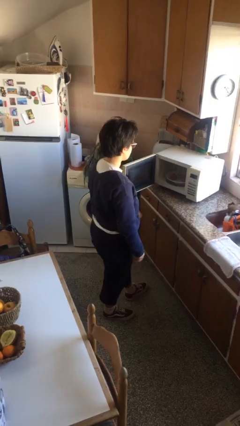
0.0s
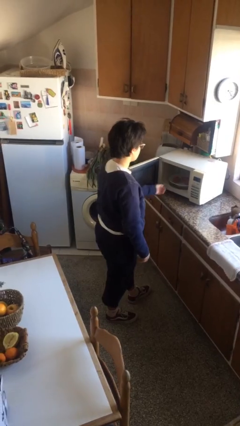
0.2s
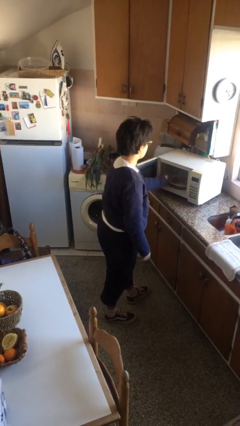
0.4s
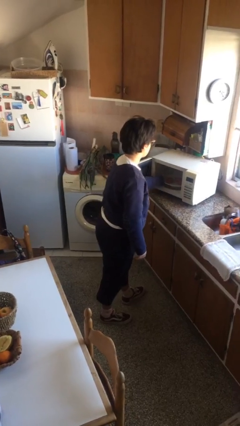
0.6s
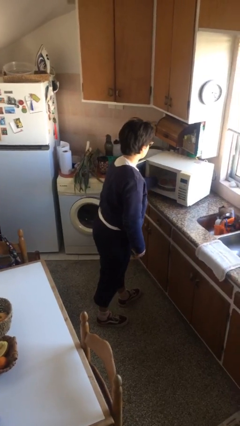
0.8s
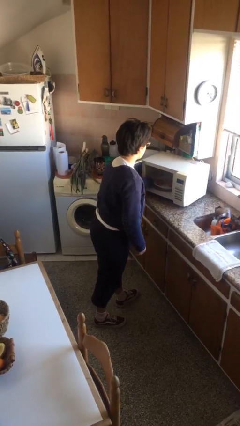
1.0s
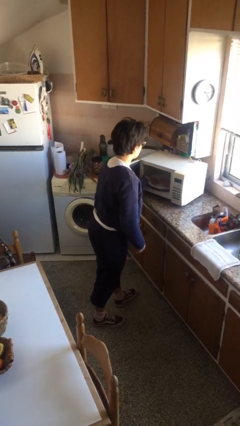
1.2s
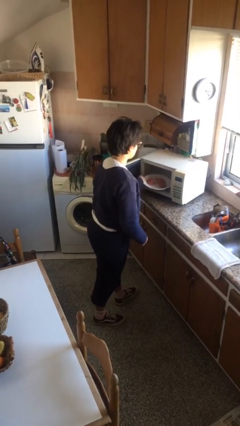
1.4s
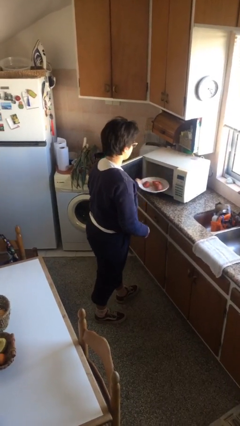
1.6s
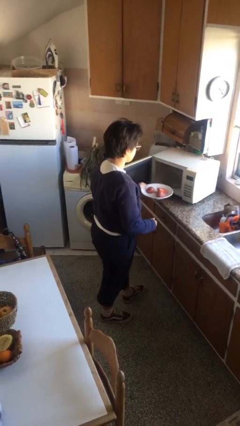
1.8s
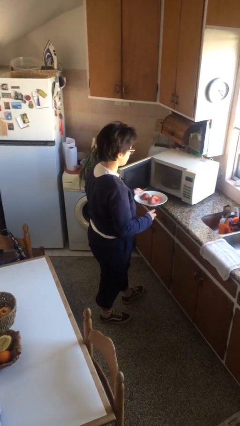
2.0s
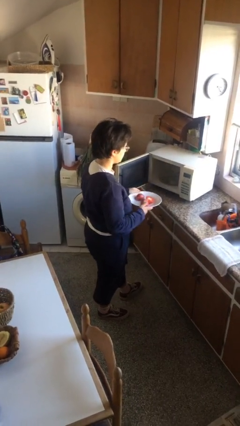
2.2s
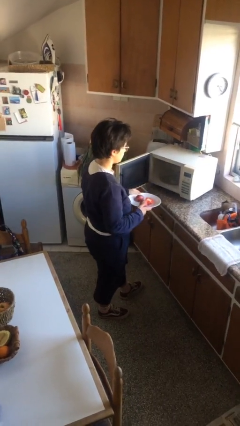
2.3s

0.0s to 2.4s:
person takes object from microwave

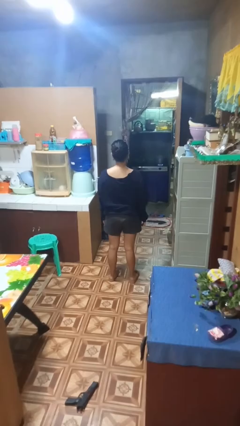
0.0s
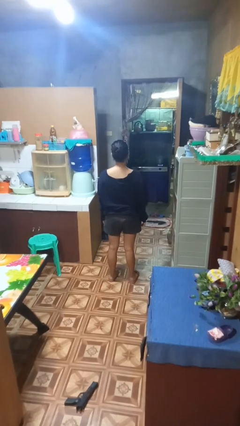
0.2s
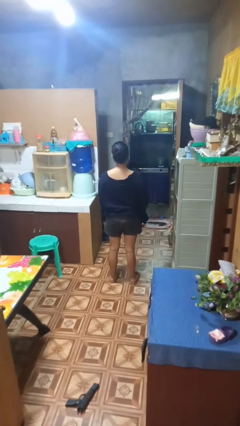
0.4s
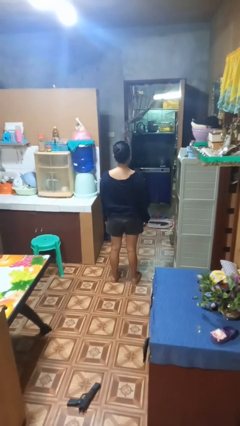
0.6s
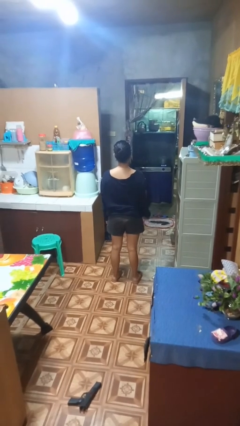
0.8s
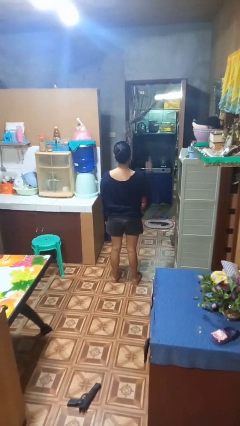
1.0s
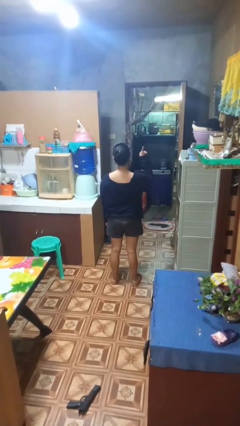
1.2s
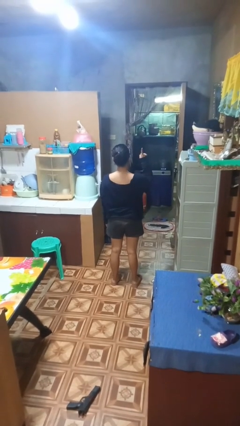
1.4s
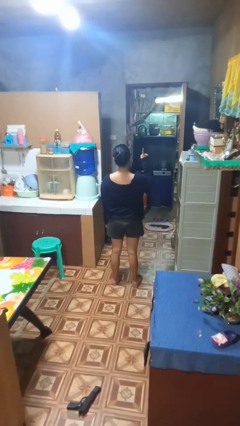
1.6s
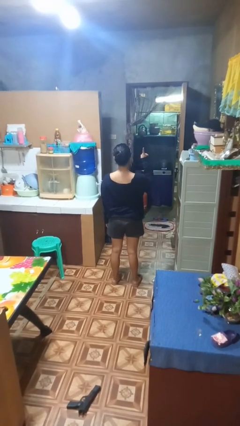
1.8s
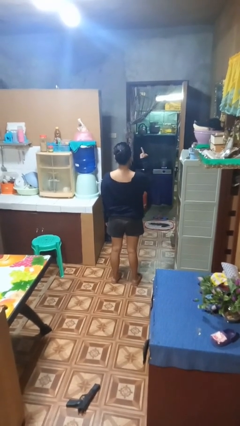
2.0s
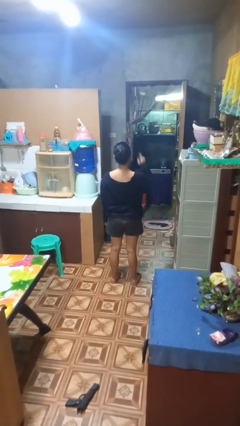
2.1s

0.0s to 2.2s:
person gestures number one

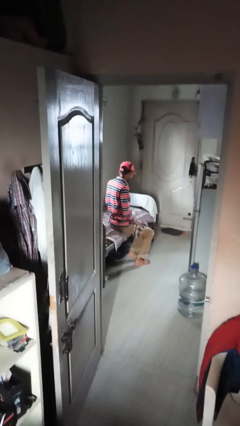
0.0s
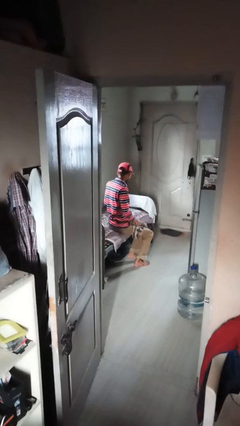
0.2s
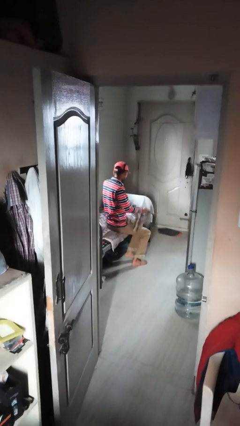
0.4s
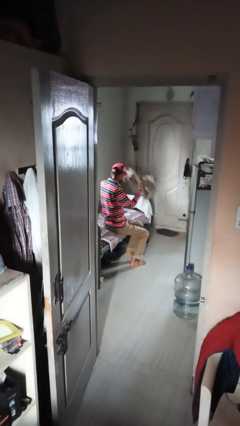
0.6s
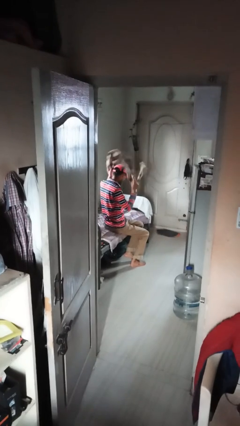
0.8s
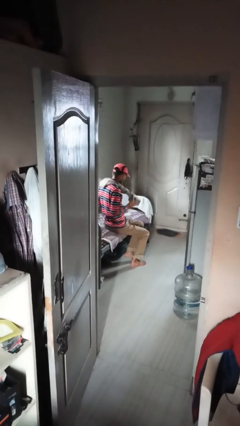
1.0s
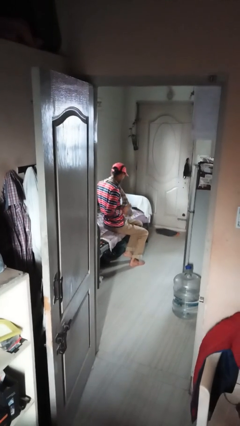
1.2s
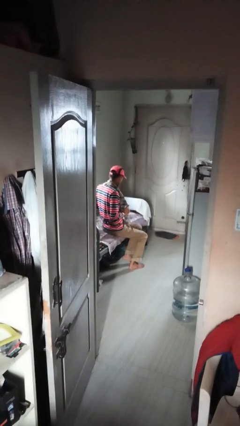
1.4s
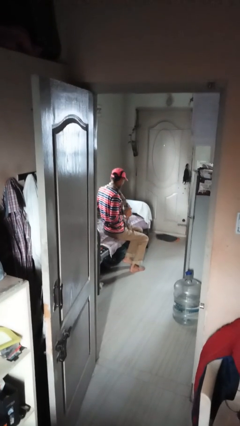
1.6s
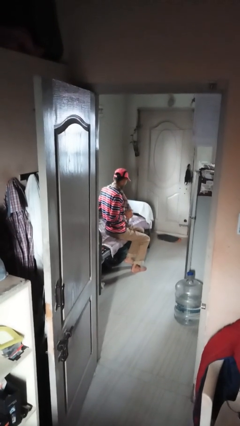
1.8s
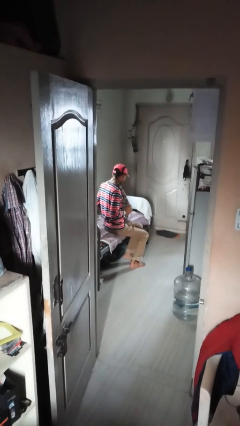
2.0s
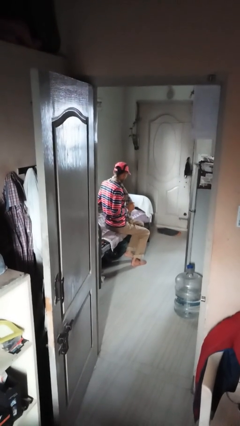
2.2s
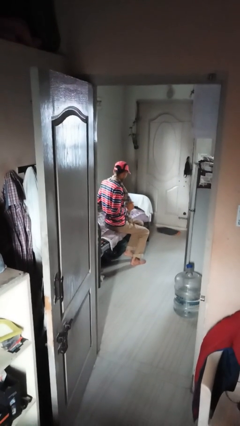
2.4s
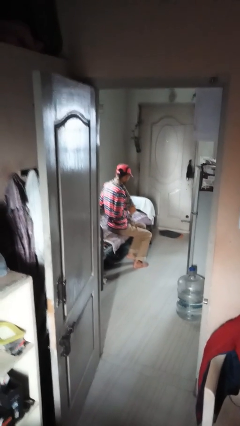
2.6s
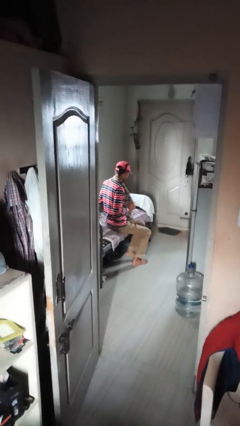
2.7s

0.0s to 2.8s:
person puts on scarf

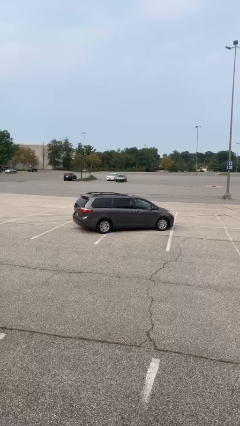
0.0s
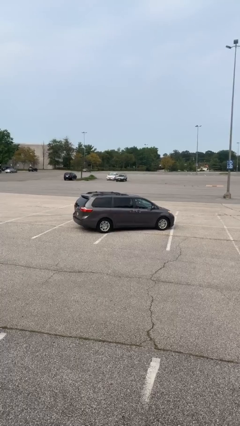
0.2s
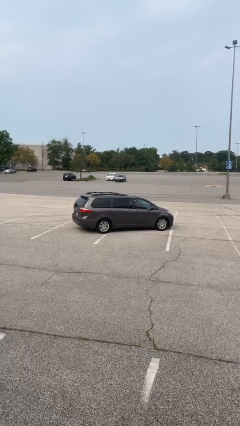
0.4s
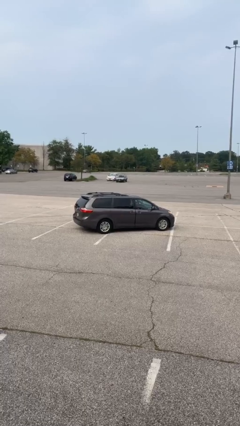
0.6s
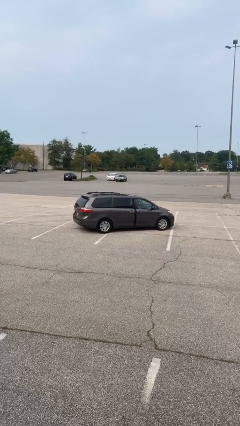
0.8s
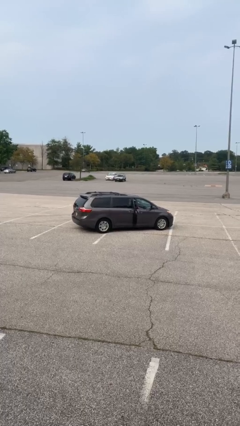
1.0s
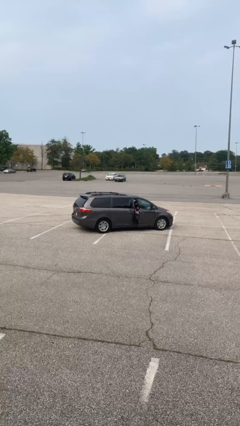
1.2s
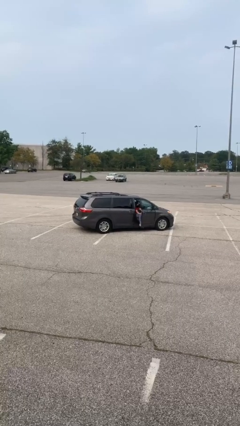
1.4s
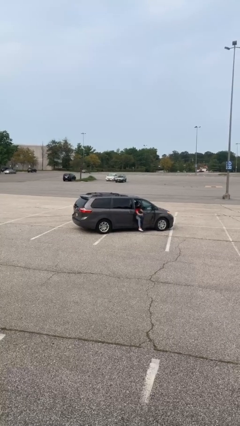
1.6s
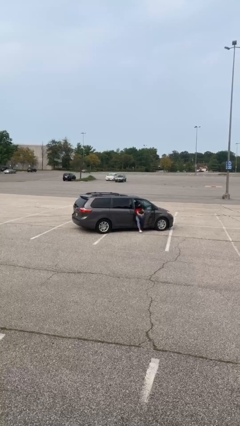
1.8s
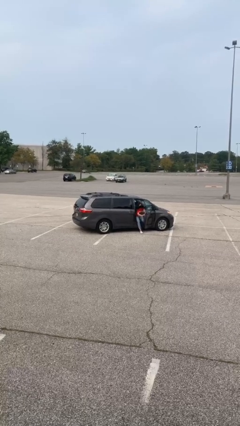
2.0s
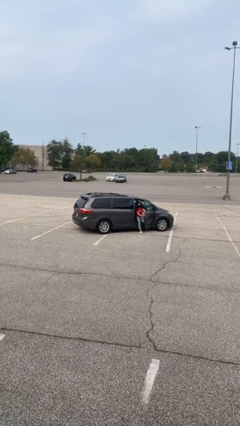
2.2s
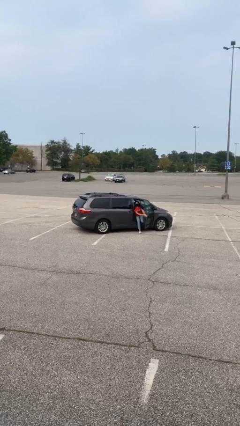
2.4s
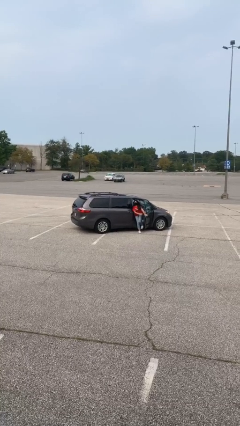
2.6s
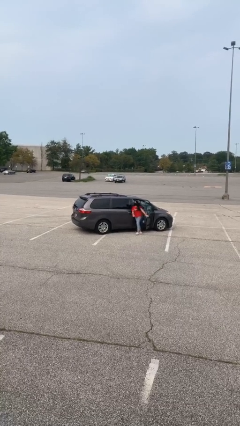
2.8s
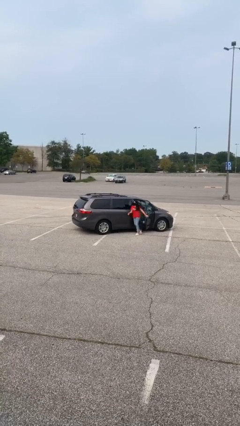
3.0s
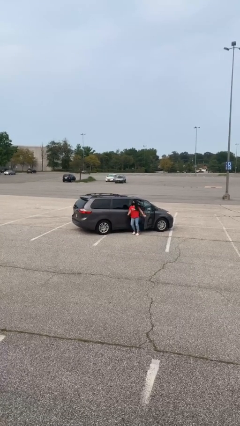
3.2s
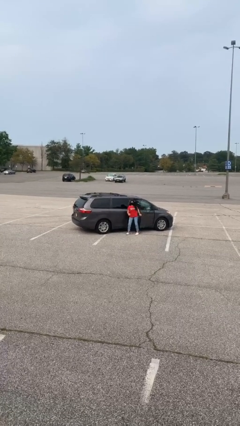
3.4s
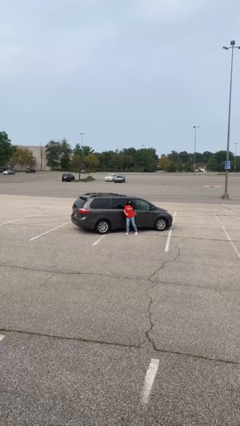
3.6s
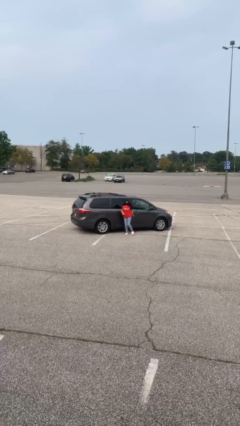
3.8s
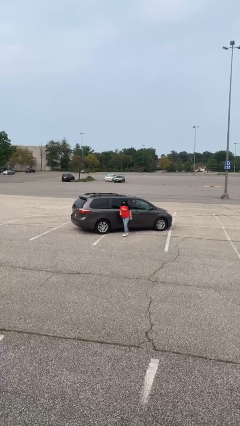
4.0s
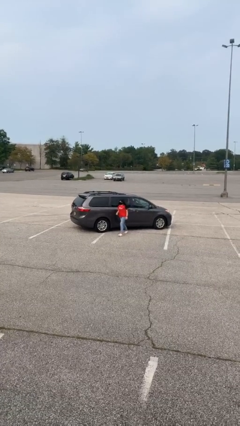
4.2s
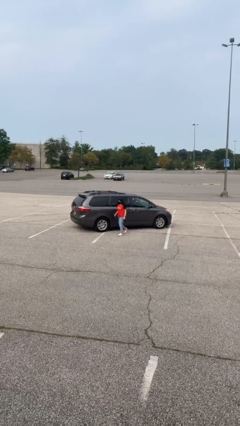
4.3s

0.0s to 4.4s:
car drops off person

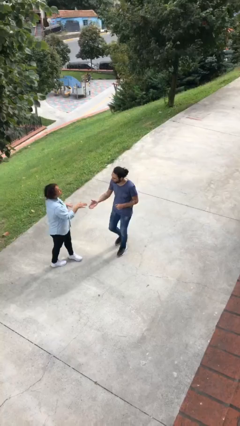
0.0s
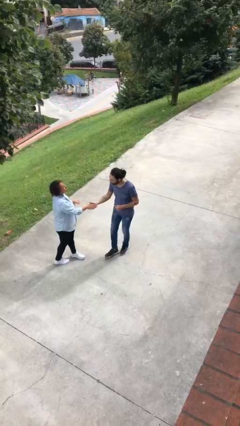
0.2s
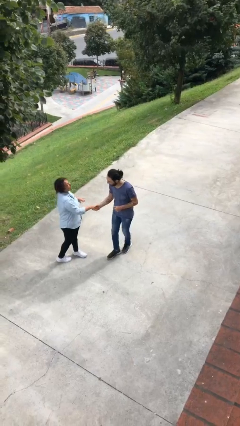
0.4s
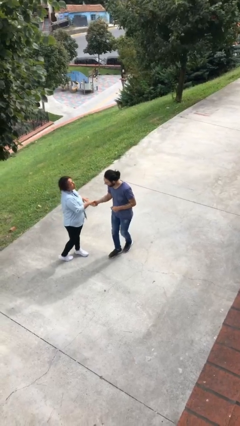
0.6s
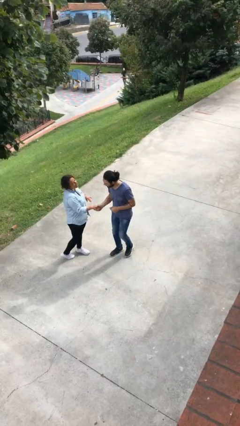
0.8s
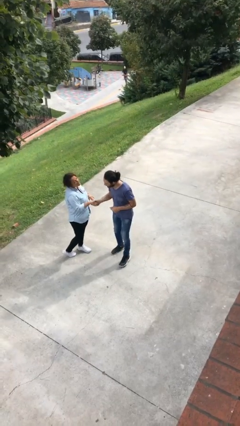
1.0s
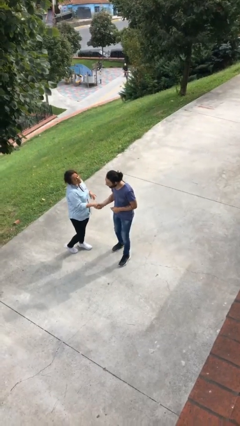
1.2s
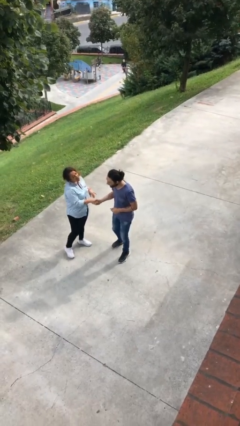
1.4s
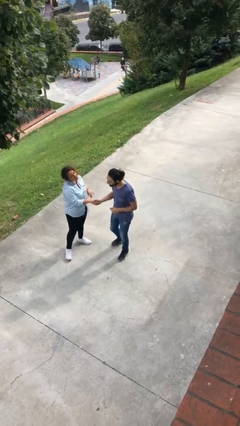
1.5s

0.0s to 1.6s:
person shakes hand

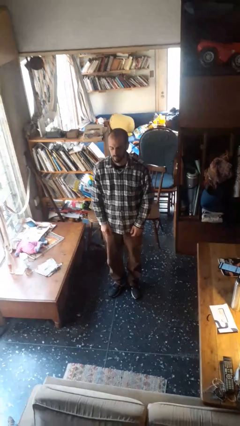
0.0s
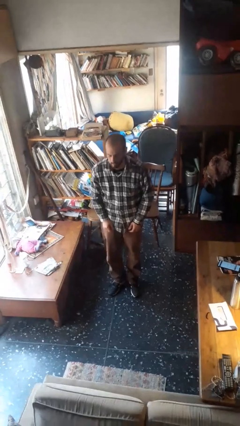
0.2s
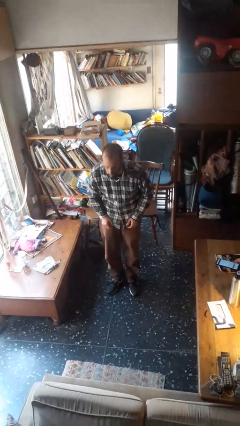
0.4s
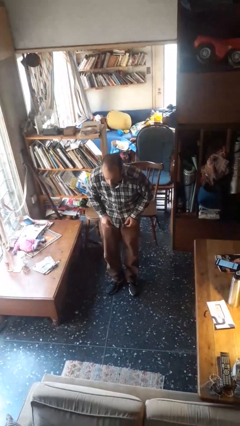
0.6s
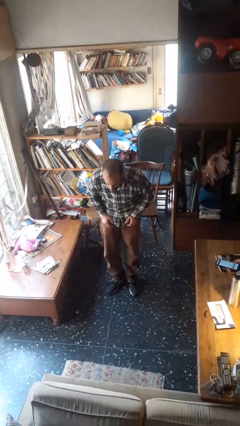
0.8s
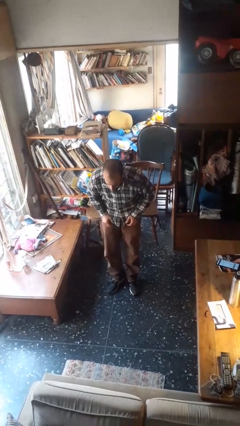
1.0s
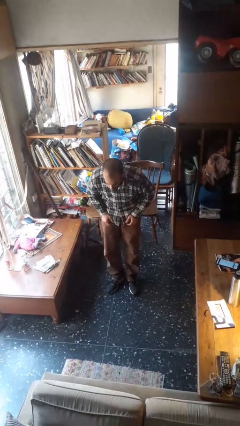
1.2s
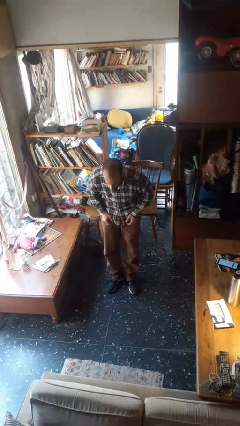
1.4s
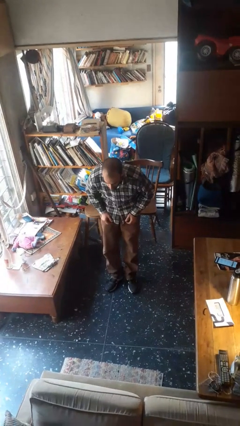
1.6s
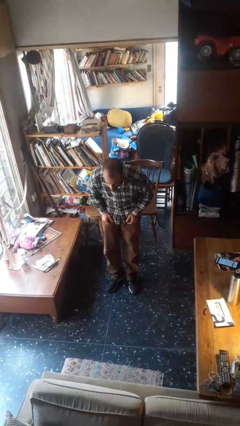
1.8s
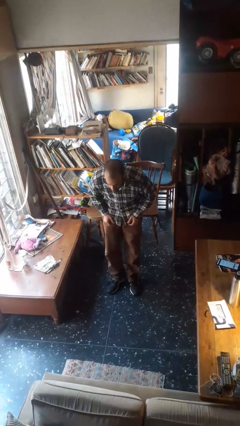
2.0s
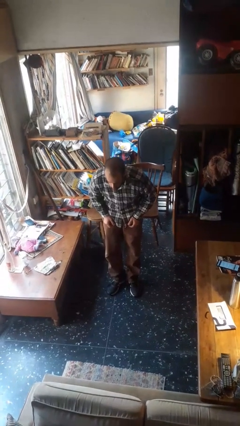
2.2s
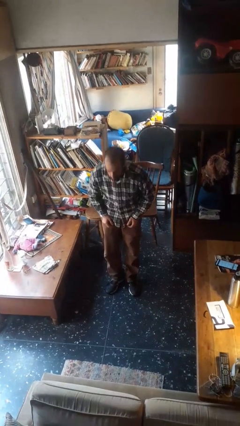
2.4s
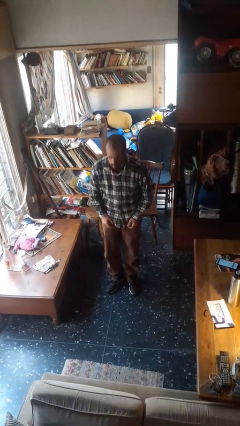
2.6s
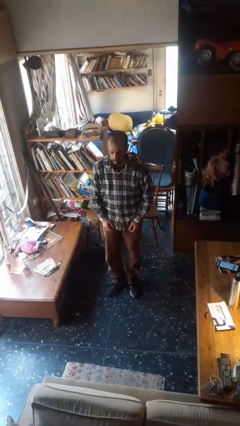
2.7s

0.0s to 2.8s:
person bows

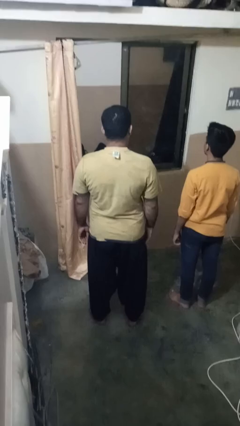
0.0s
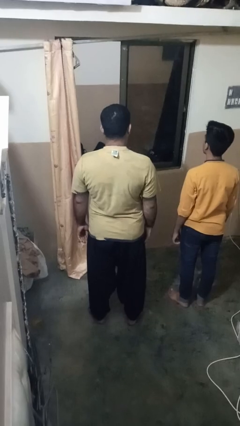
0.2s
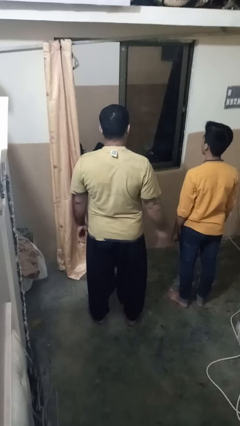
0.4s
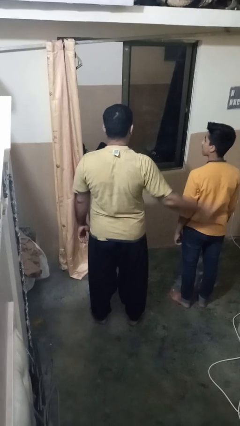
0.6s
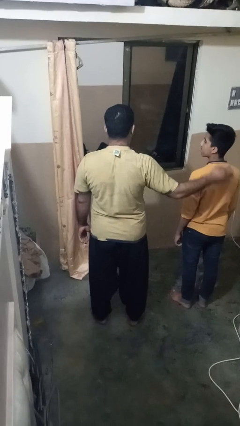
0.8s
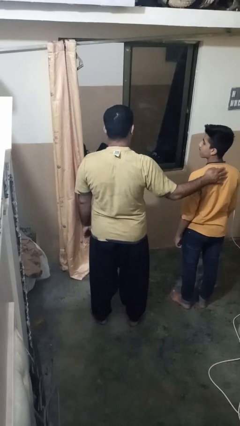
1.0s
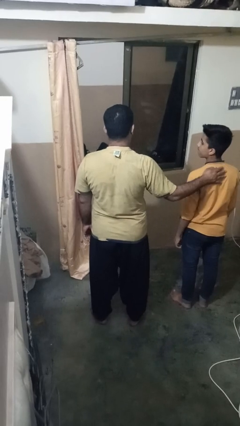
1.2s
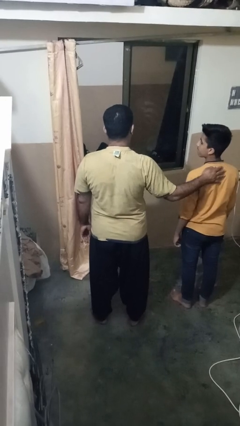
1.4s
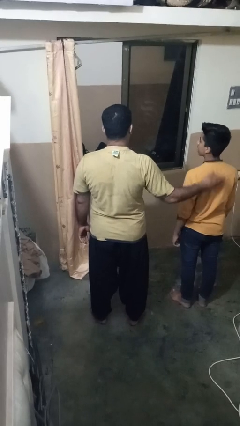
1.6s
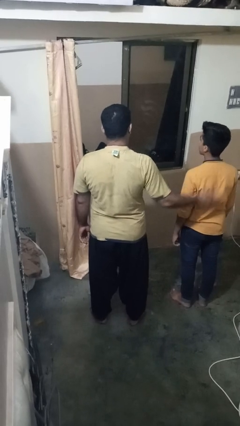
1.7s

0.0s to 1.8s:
person touches back of person
